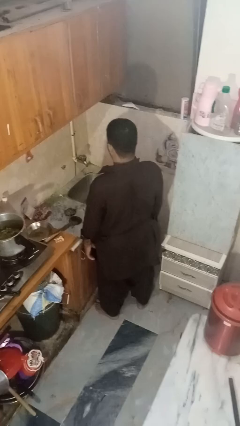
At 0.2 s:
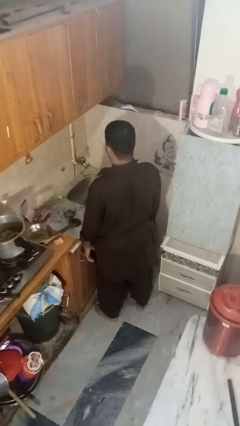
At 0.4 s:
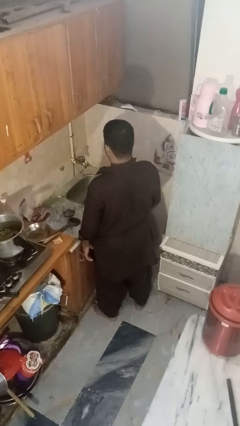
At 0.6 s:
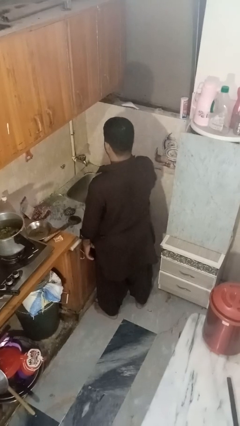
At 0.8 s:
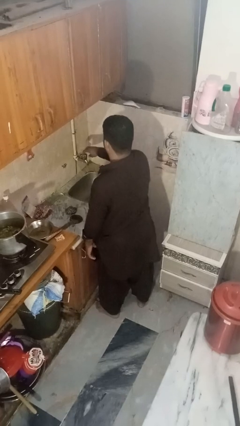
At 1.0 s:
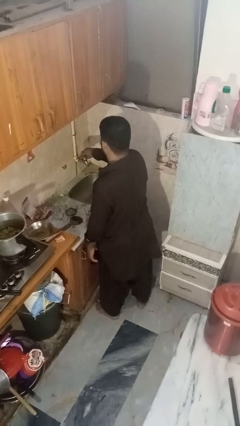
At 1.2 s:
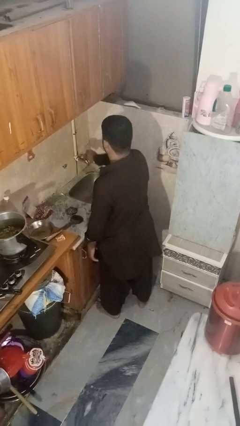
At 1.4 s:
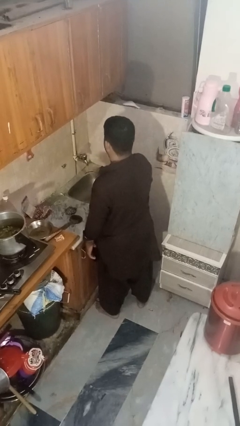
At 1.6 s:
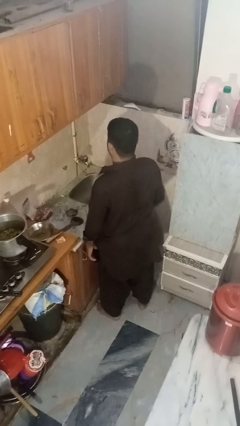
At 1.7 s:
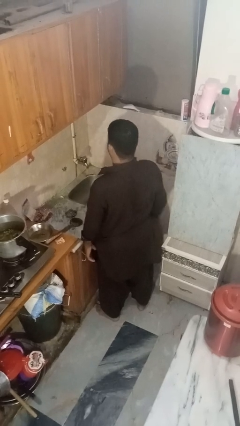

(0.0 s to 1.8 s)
person turns off faucet

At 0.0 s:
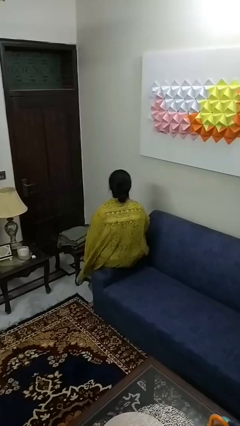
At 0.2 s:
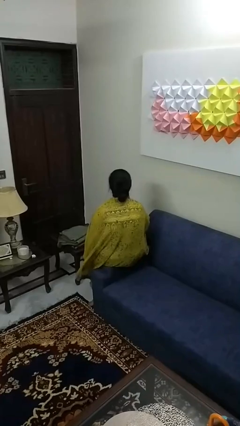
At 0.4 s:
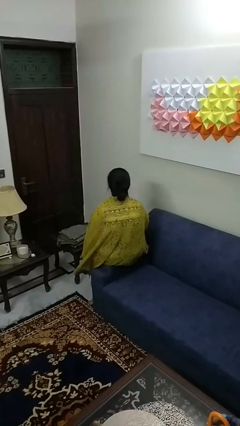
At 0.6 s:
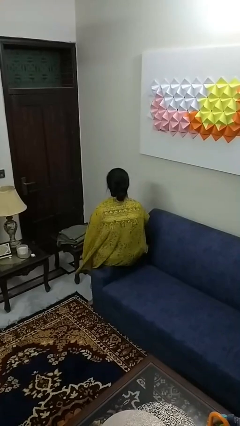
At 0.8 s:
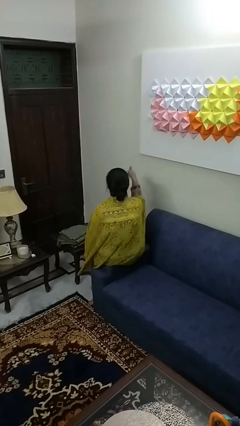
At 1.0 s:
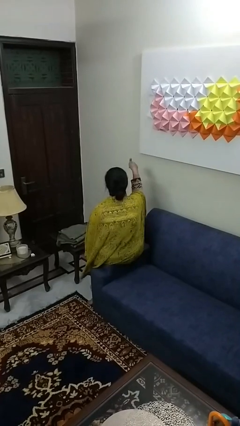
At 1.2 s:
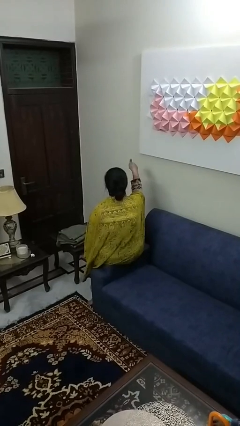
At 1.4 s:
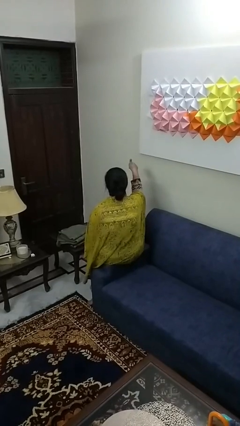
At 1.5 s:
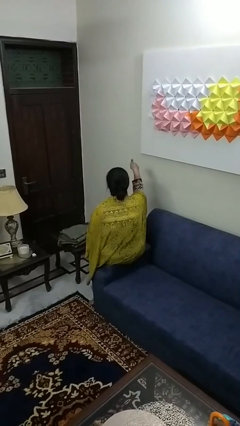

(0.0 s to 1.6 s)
person gestures thumbs up

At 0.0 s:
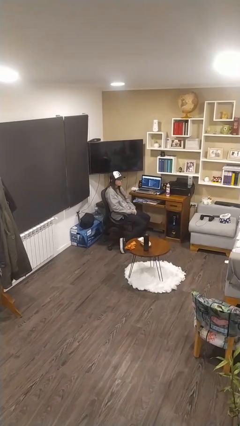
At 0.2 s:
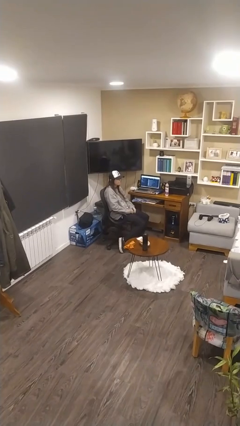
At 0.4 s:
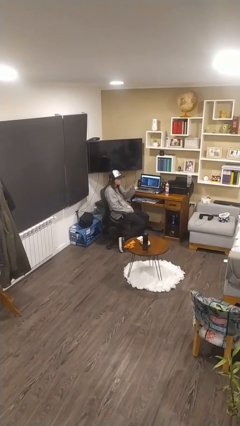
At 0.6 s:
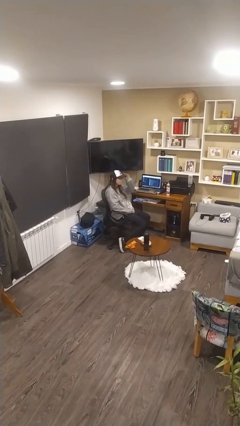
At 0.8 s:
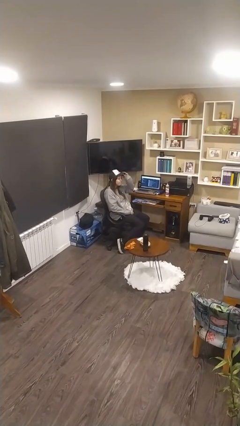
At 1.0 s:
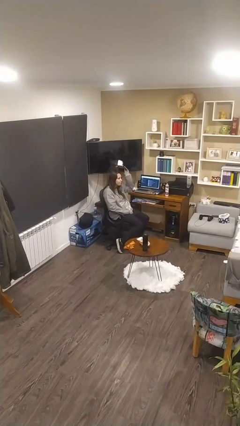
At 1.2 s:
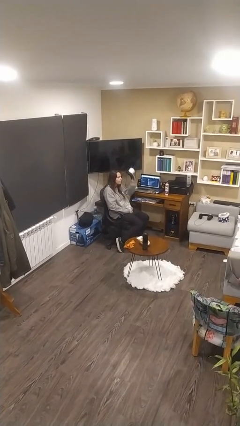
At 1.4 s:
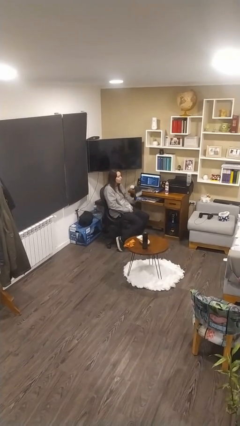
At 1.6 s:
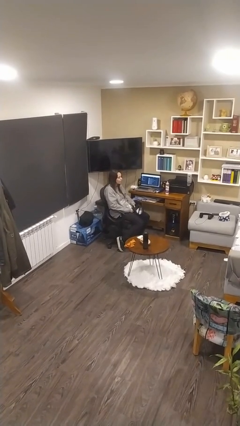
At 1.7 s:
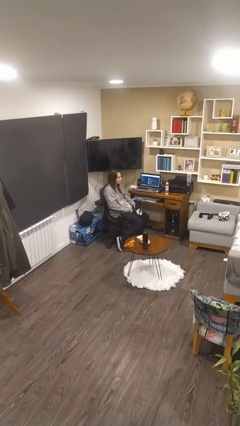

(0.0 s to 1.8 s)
person takes off hat

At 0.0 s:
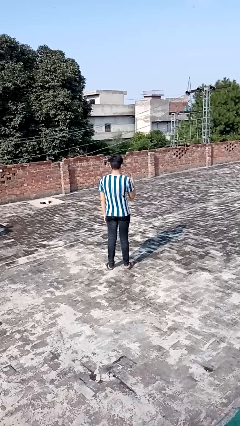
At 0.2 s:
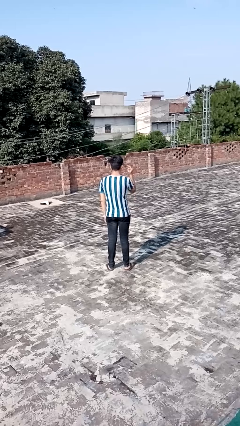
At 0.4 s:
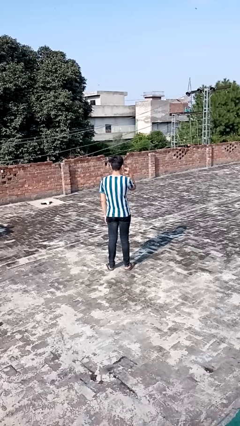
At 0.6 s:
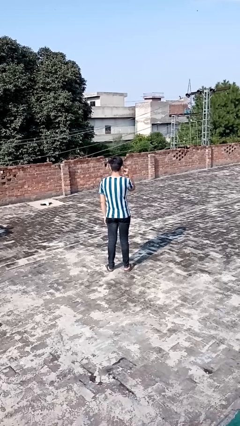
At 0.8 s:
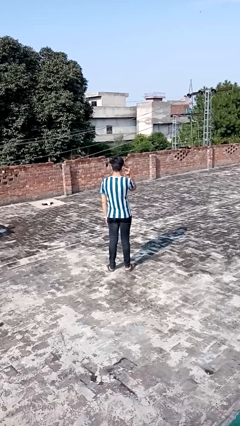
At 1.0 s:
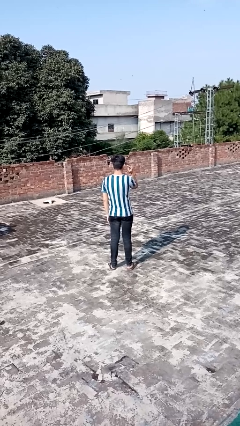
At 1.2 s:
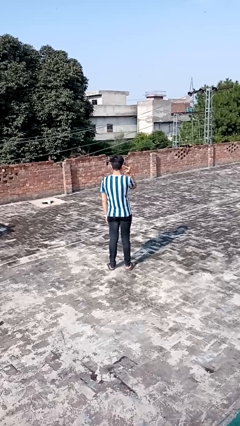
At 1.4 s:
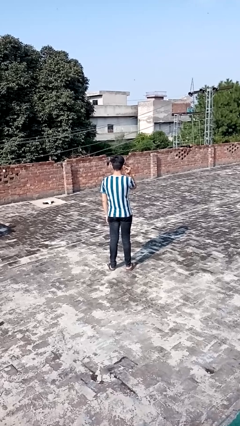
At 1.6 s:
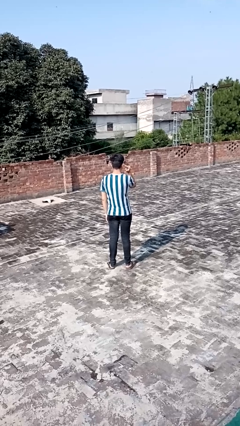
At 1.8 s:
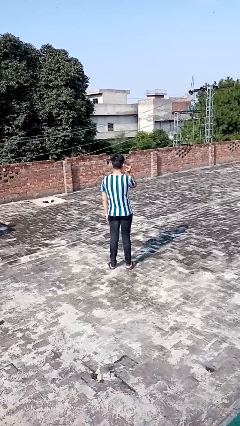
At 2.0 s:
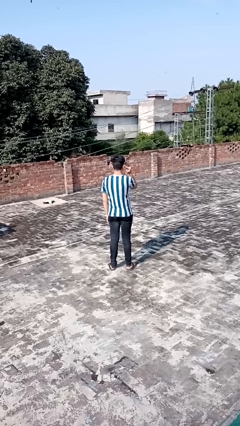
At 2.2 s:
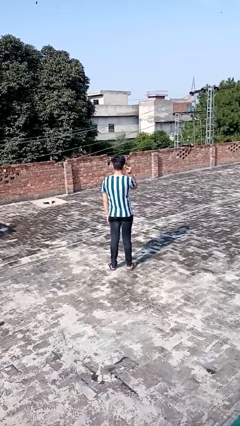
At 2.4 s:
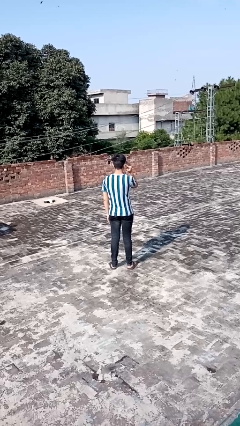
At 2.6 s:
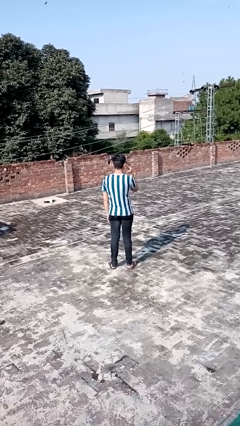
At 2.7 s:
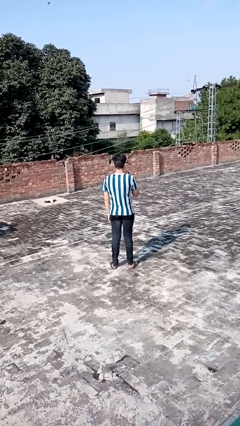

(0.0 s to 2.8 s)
person gestures listen closely

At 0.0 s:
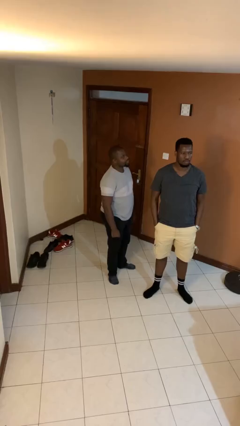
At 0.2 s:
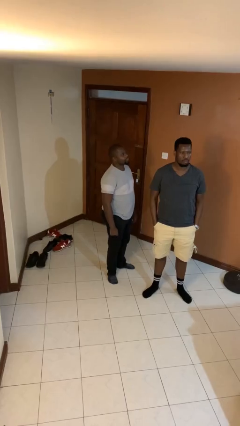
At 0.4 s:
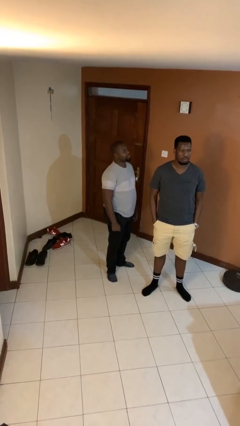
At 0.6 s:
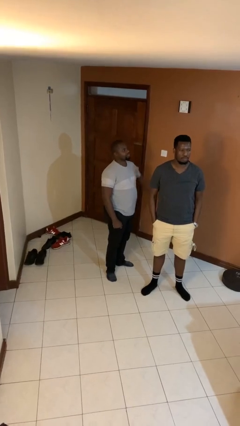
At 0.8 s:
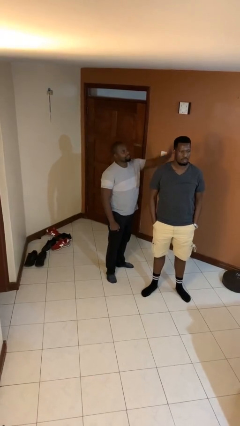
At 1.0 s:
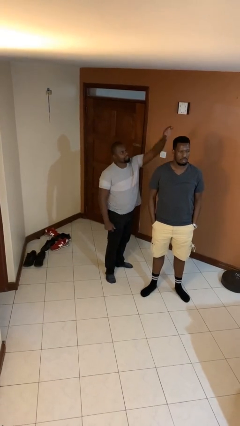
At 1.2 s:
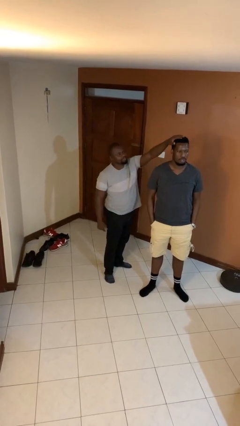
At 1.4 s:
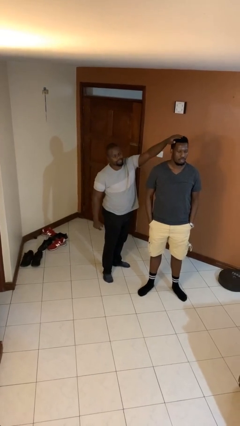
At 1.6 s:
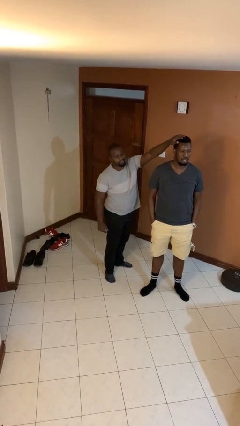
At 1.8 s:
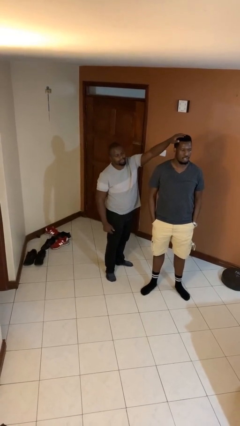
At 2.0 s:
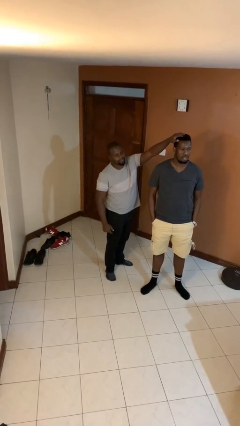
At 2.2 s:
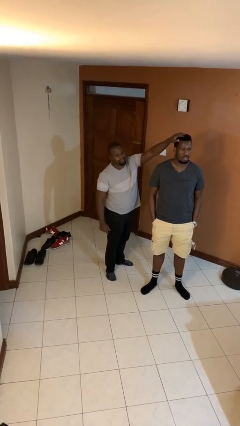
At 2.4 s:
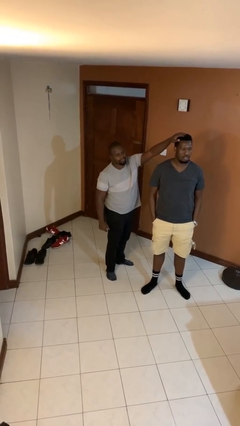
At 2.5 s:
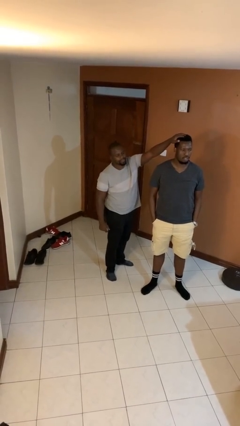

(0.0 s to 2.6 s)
person grabs person by hair

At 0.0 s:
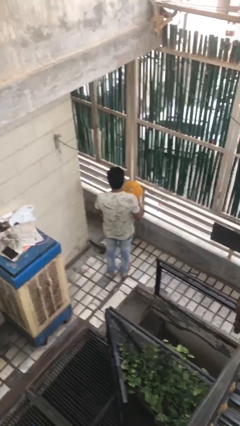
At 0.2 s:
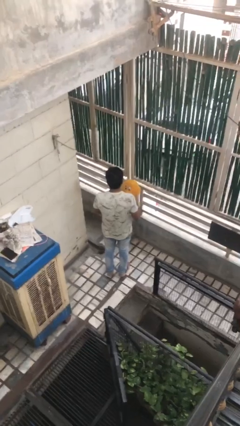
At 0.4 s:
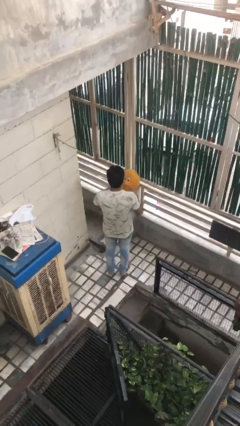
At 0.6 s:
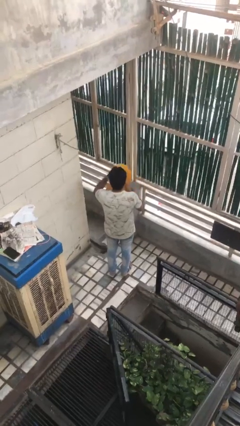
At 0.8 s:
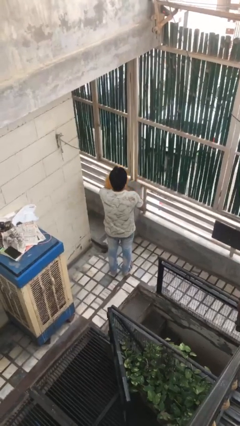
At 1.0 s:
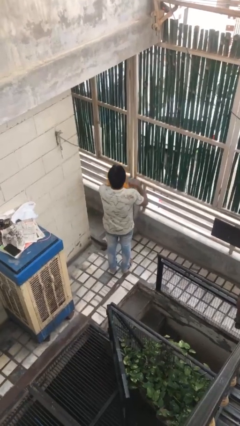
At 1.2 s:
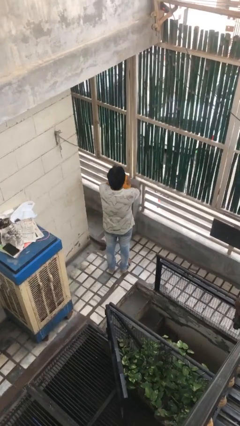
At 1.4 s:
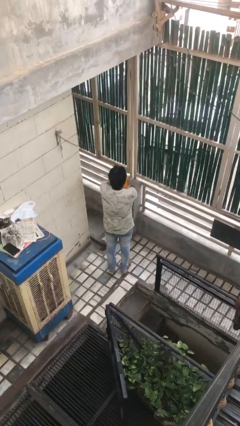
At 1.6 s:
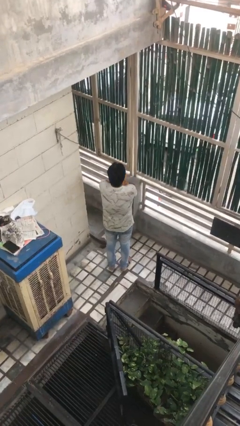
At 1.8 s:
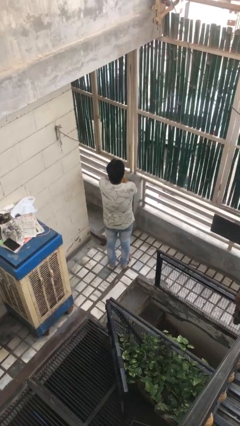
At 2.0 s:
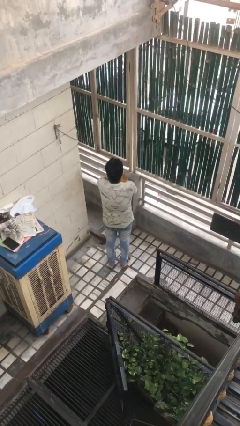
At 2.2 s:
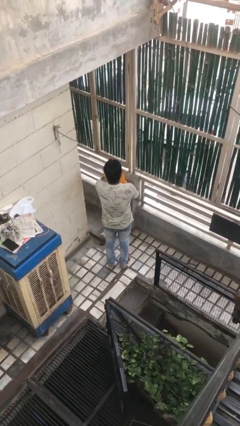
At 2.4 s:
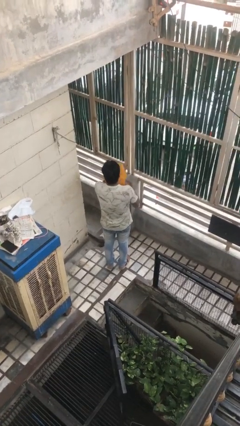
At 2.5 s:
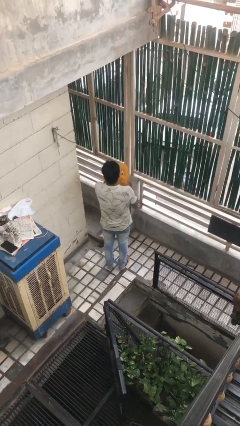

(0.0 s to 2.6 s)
person hugs stuffed animal

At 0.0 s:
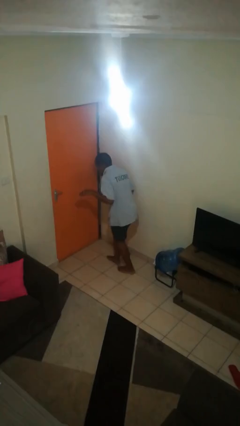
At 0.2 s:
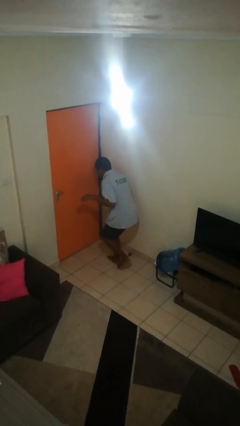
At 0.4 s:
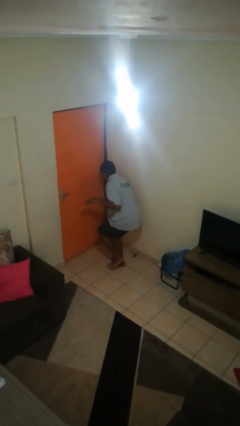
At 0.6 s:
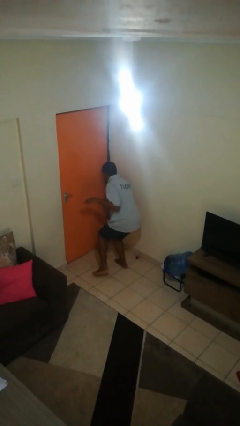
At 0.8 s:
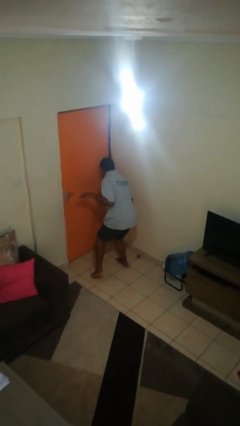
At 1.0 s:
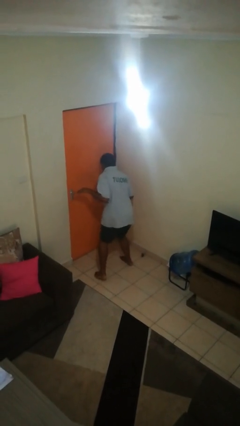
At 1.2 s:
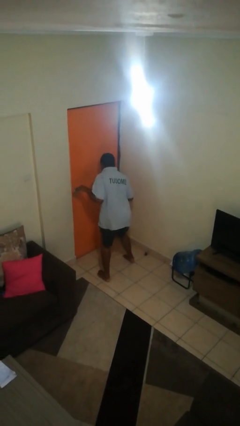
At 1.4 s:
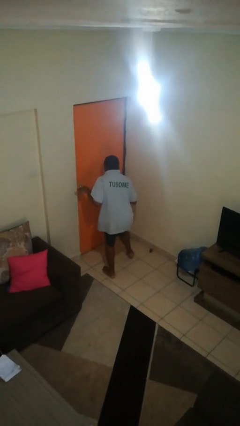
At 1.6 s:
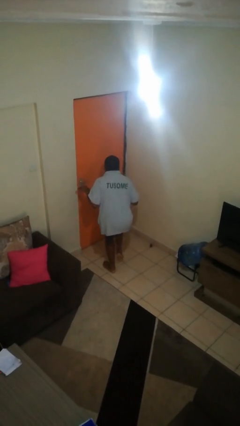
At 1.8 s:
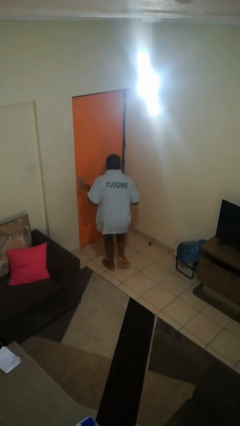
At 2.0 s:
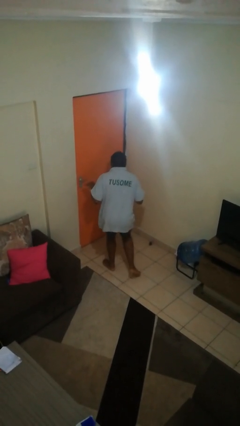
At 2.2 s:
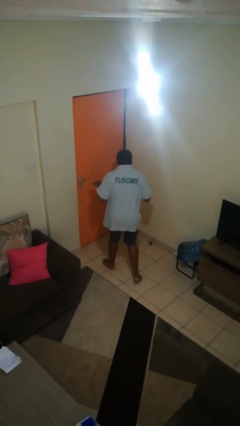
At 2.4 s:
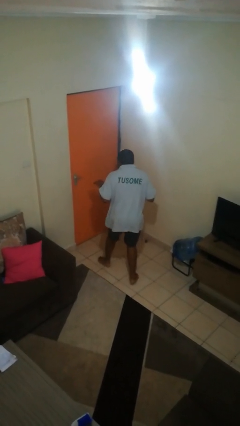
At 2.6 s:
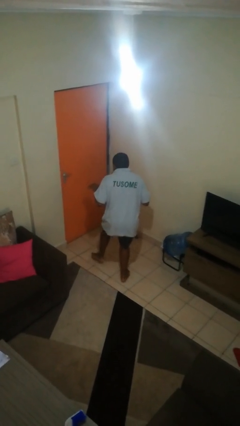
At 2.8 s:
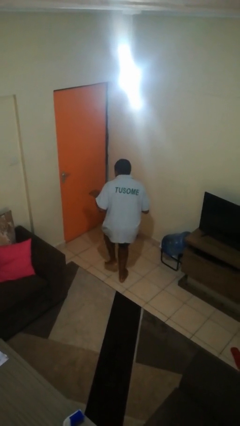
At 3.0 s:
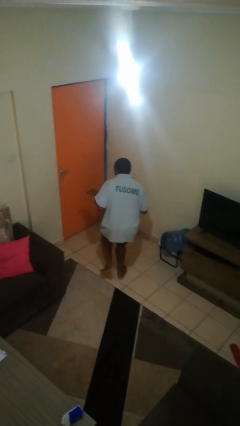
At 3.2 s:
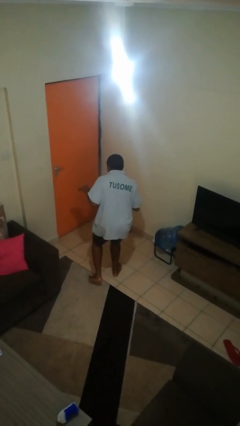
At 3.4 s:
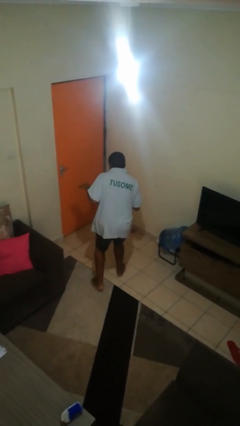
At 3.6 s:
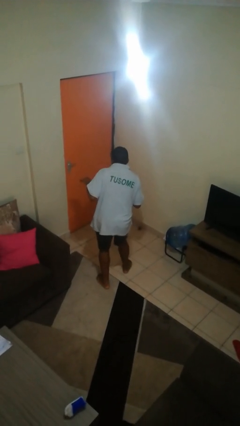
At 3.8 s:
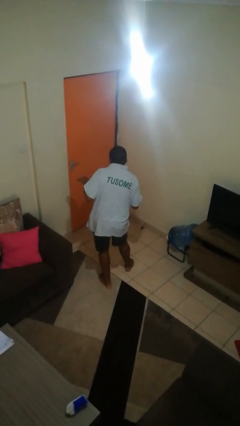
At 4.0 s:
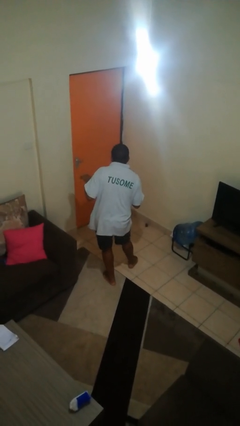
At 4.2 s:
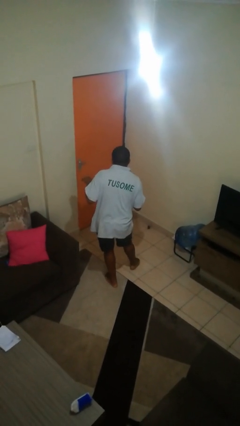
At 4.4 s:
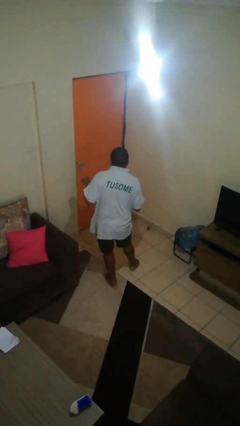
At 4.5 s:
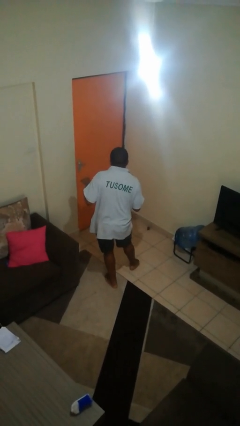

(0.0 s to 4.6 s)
person walks tiptoe
